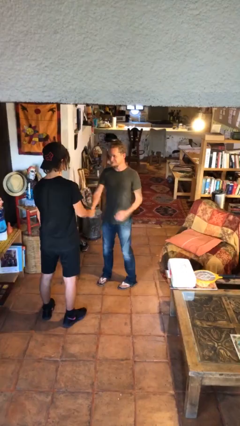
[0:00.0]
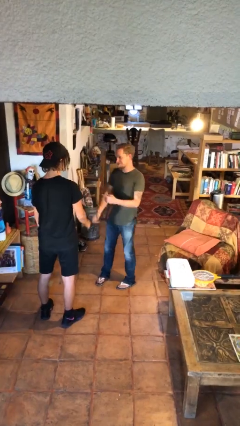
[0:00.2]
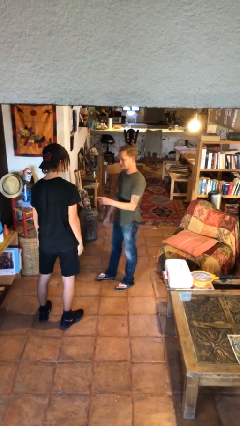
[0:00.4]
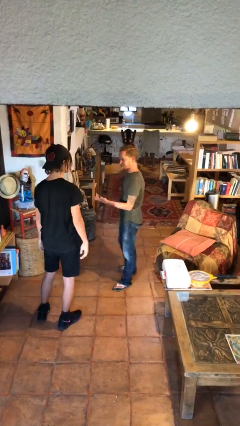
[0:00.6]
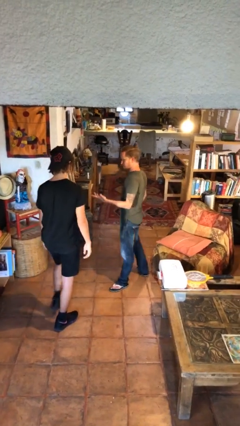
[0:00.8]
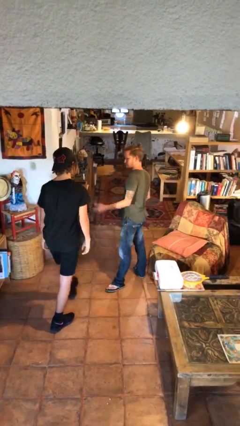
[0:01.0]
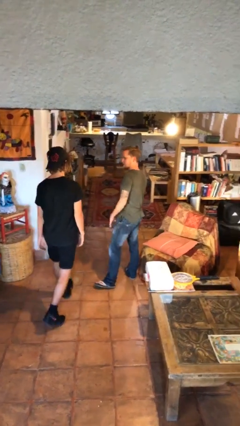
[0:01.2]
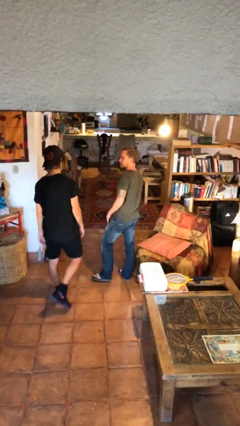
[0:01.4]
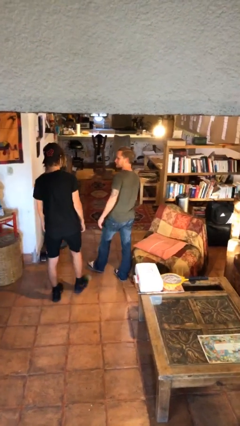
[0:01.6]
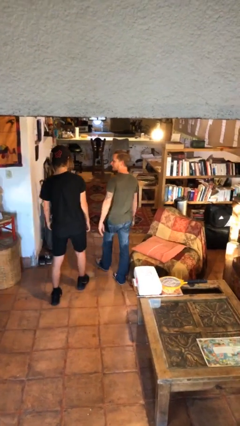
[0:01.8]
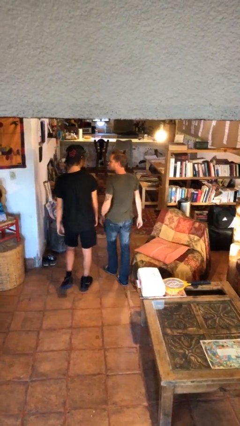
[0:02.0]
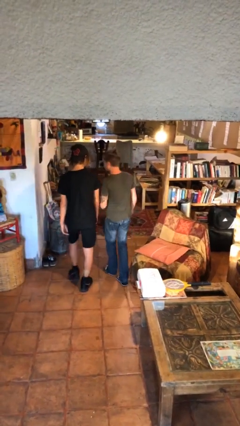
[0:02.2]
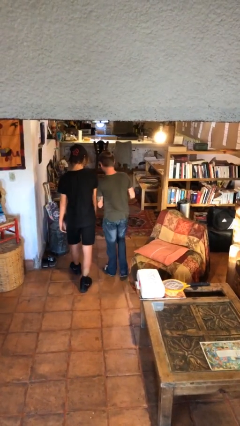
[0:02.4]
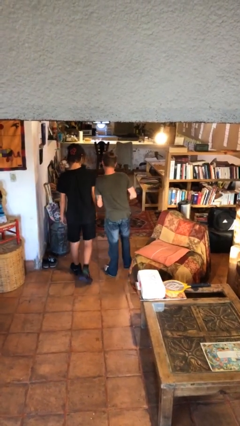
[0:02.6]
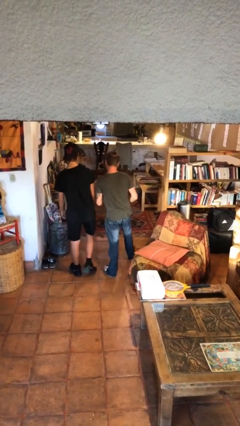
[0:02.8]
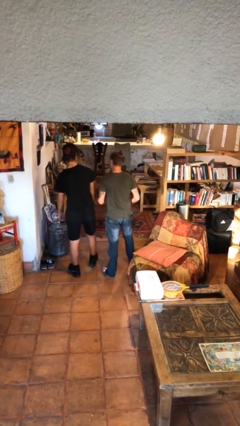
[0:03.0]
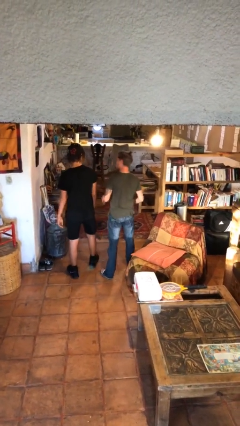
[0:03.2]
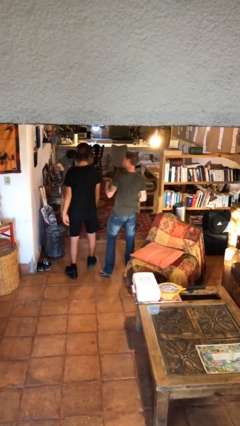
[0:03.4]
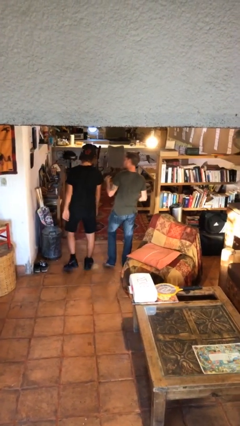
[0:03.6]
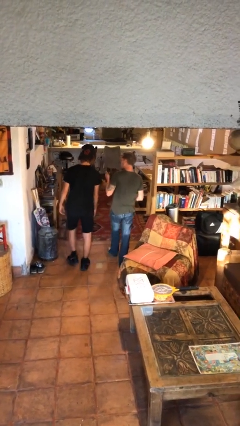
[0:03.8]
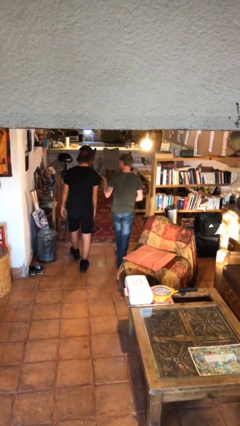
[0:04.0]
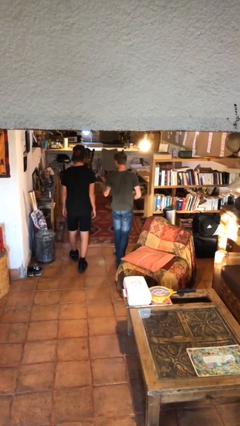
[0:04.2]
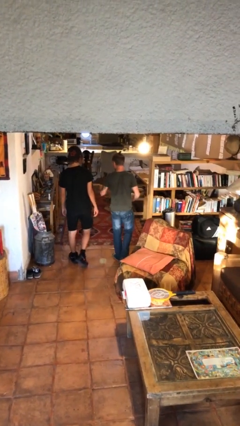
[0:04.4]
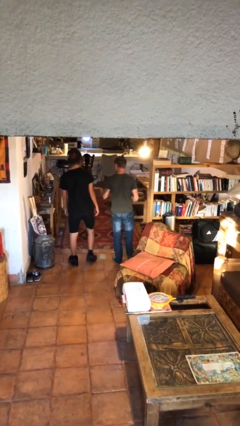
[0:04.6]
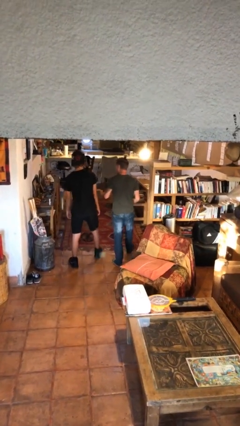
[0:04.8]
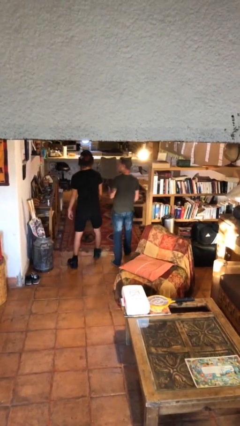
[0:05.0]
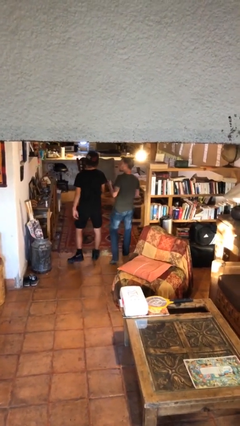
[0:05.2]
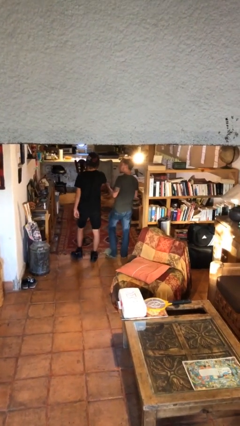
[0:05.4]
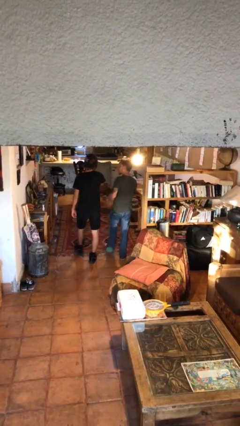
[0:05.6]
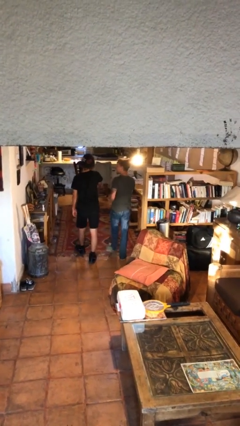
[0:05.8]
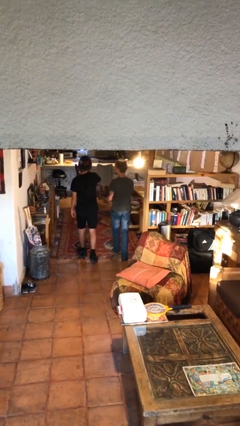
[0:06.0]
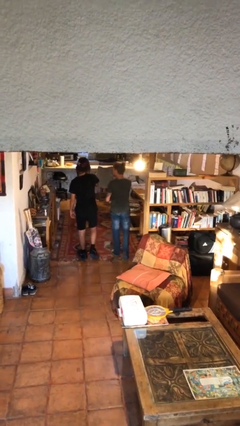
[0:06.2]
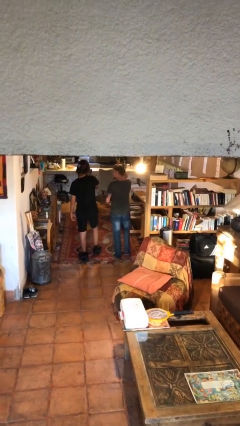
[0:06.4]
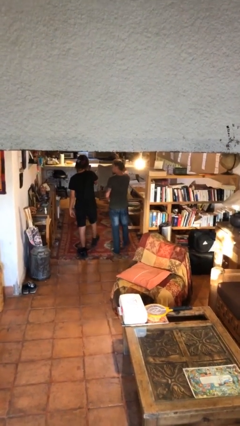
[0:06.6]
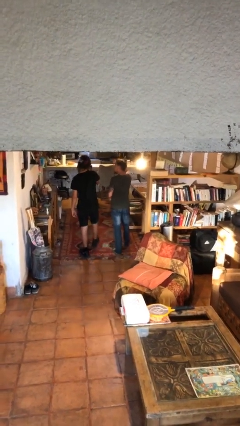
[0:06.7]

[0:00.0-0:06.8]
person talks to person

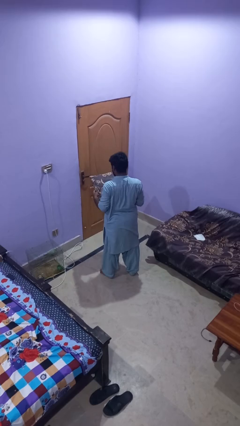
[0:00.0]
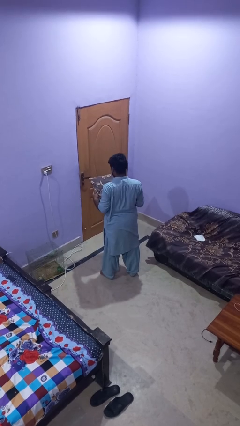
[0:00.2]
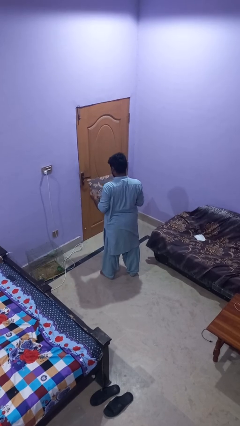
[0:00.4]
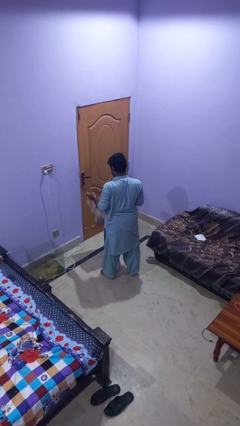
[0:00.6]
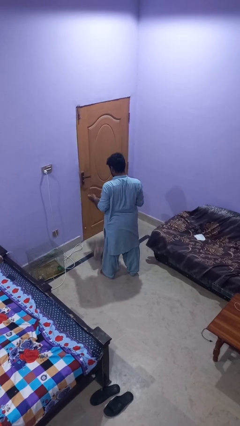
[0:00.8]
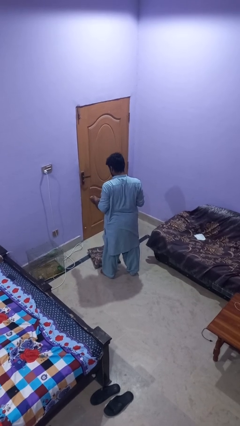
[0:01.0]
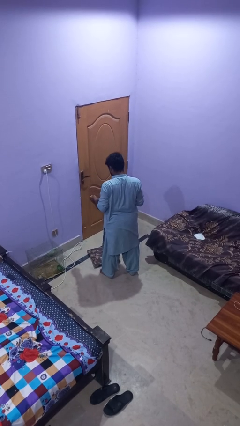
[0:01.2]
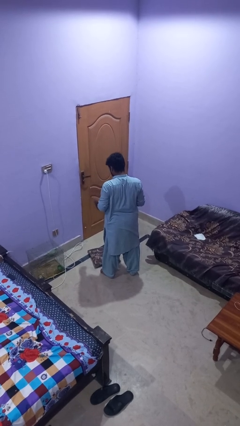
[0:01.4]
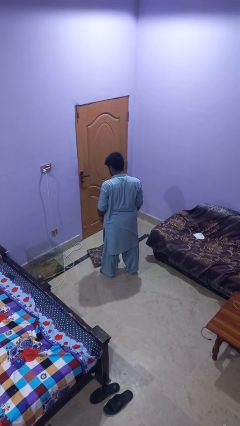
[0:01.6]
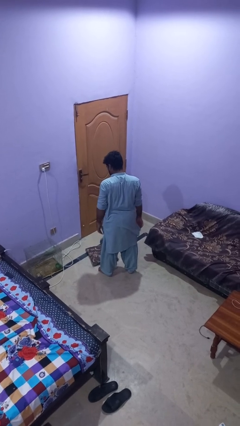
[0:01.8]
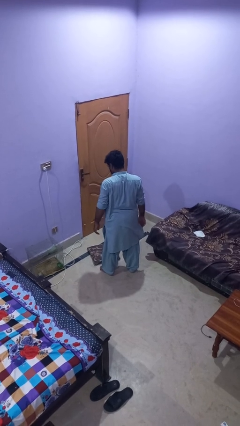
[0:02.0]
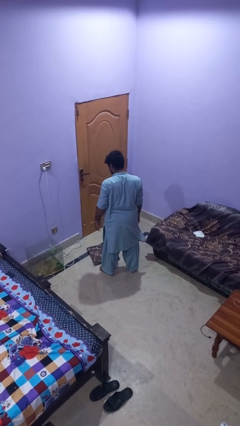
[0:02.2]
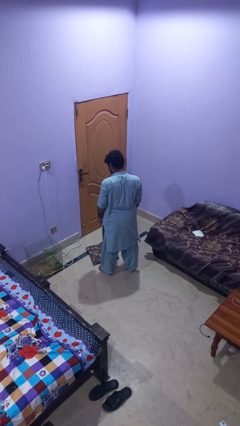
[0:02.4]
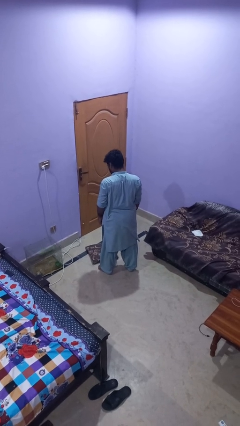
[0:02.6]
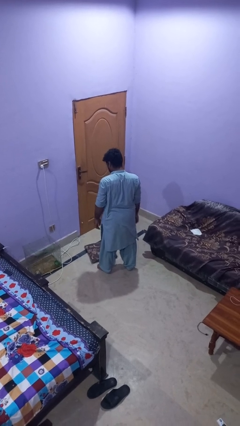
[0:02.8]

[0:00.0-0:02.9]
person drops object

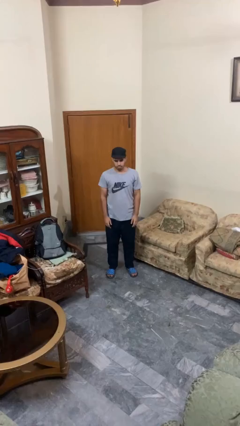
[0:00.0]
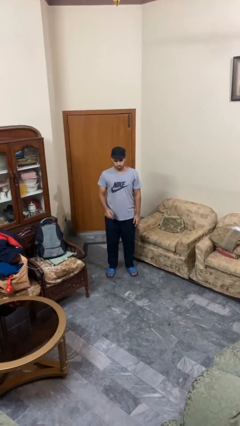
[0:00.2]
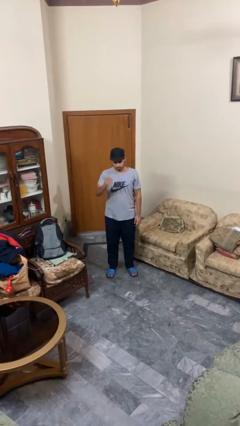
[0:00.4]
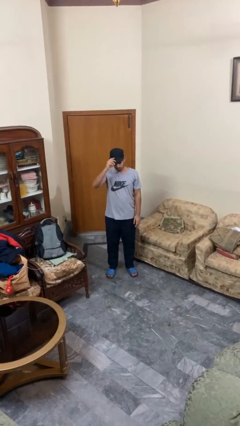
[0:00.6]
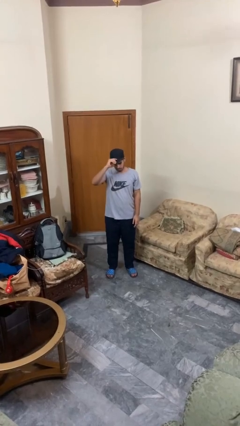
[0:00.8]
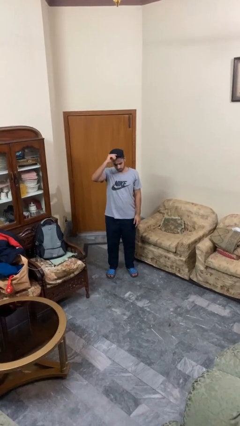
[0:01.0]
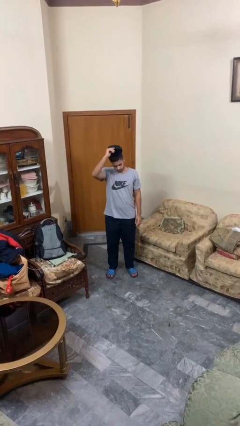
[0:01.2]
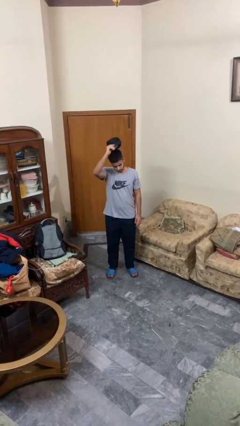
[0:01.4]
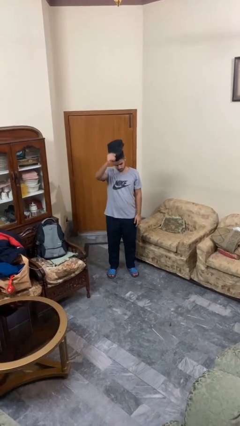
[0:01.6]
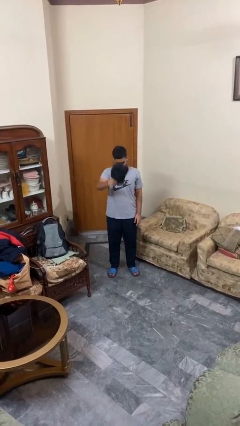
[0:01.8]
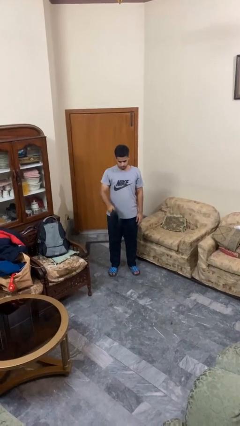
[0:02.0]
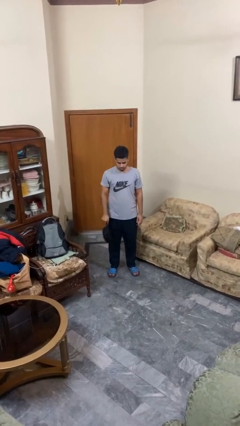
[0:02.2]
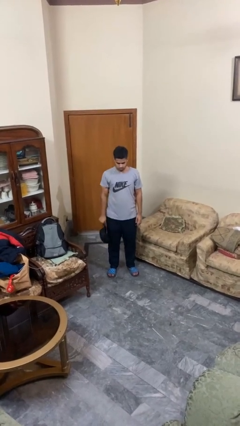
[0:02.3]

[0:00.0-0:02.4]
person takes off hat

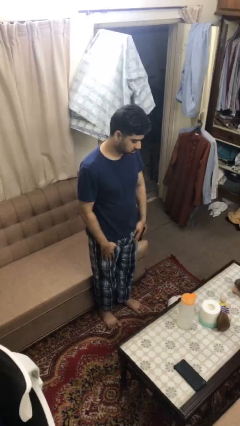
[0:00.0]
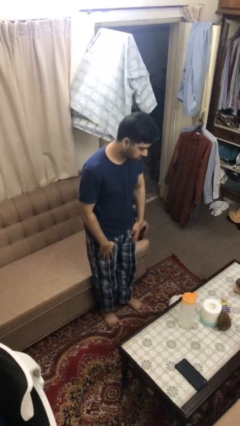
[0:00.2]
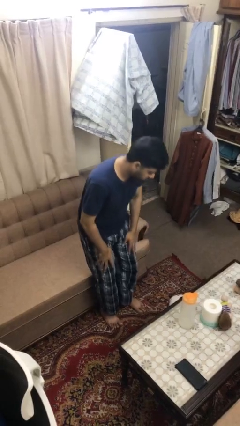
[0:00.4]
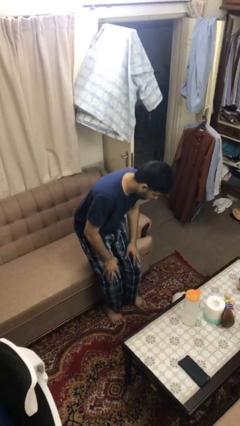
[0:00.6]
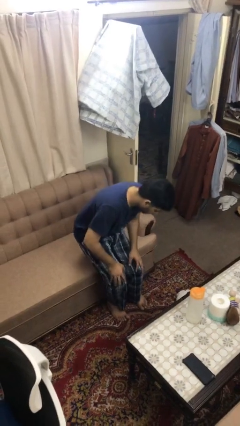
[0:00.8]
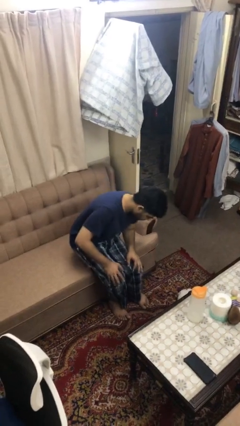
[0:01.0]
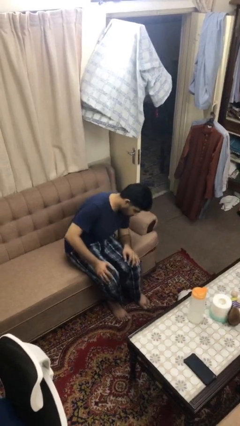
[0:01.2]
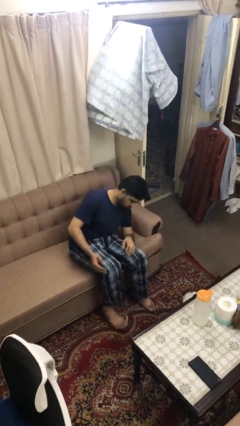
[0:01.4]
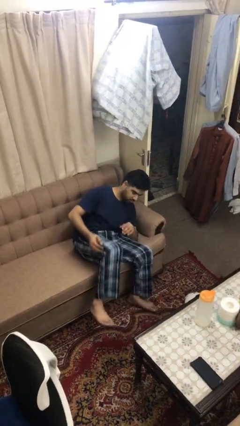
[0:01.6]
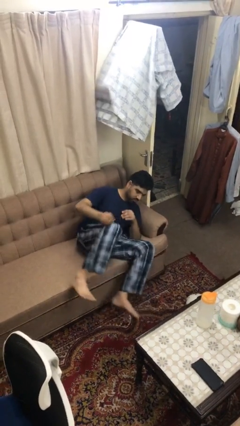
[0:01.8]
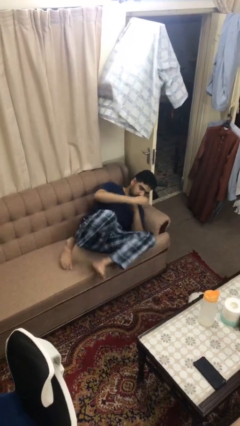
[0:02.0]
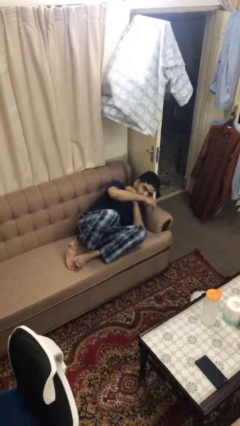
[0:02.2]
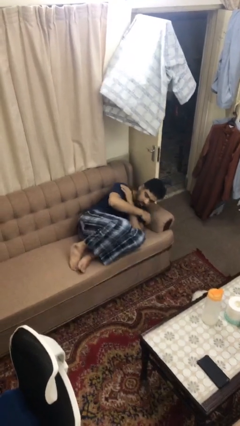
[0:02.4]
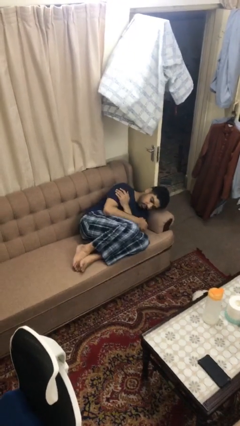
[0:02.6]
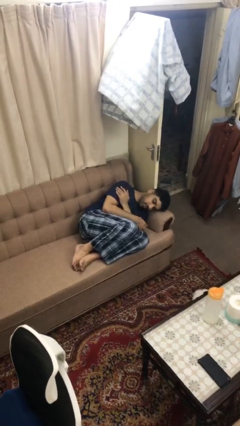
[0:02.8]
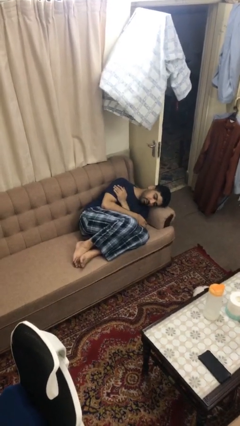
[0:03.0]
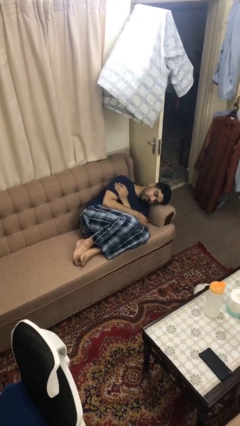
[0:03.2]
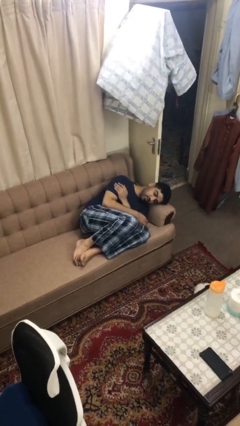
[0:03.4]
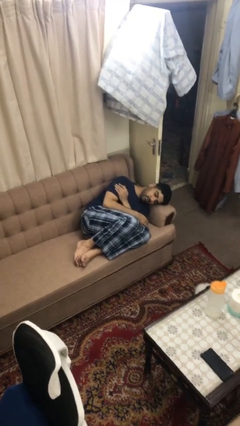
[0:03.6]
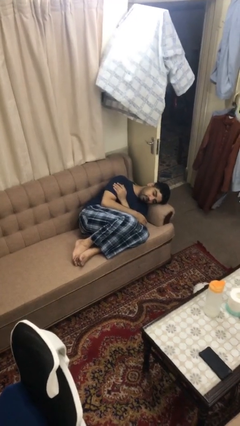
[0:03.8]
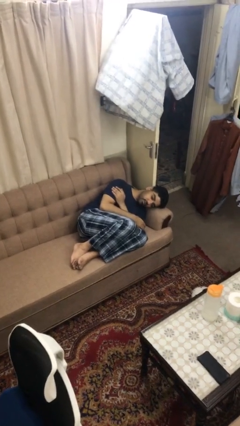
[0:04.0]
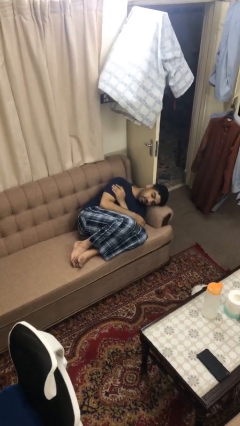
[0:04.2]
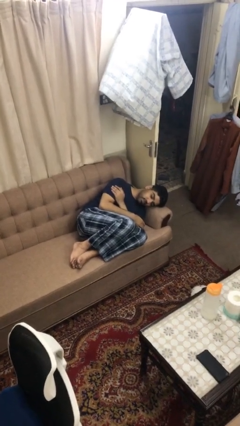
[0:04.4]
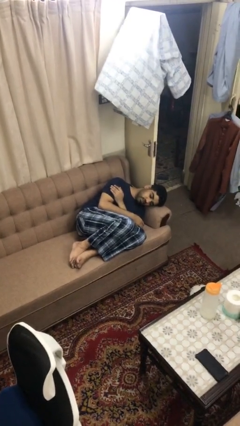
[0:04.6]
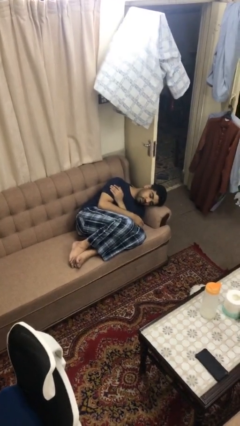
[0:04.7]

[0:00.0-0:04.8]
person lies down on couch

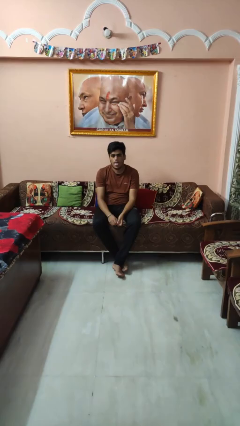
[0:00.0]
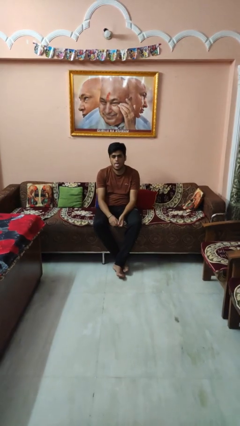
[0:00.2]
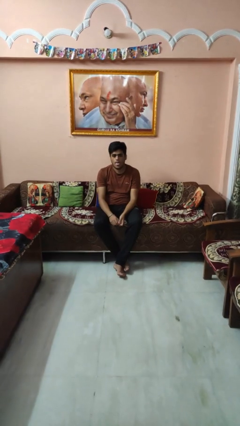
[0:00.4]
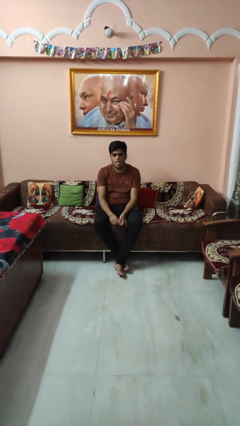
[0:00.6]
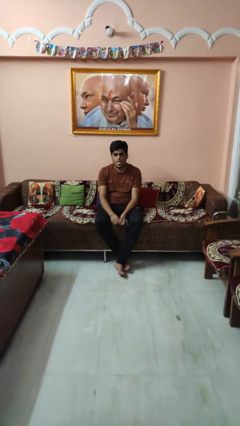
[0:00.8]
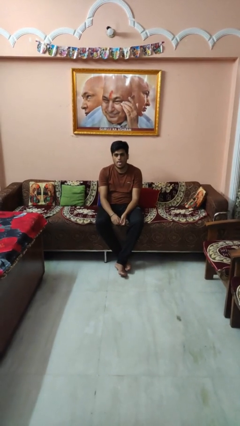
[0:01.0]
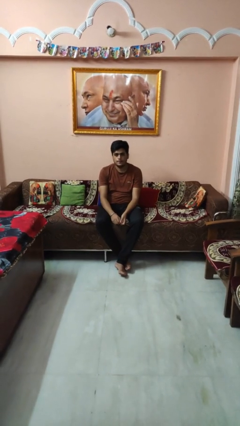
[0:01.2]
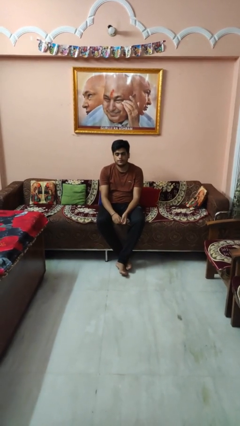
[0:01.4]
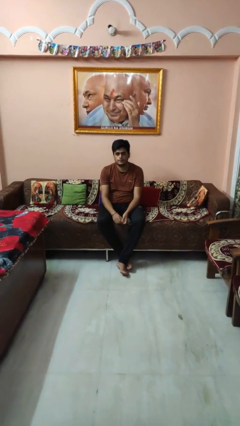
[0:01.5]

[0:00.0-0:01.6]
person sticks out tongue
